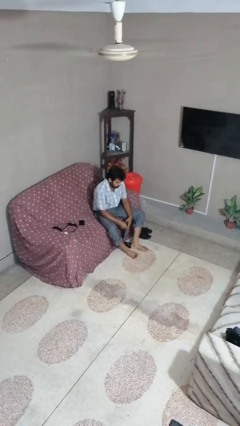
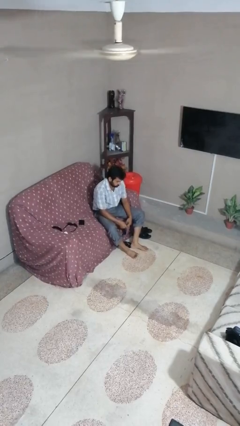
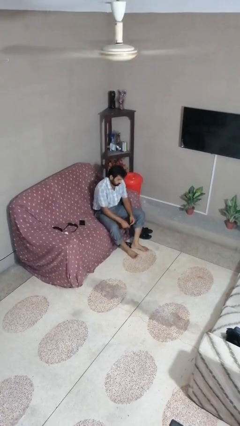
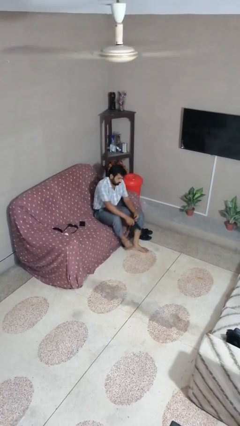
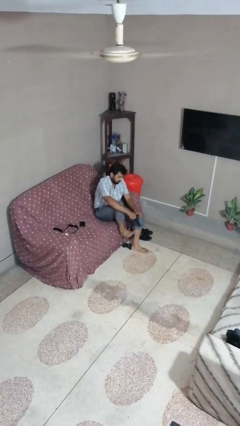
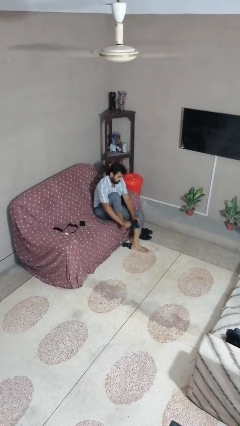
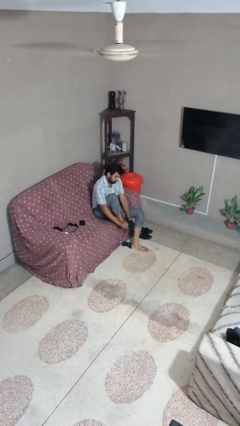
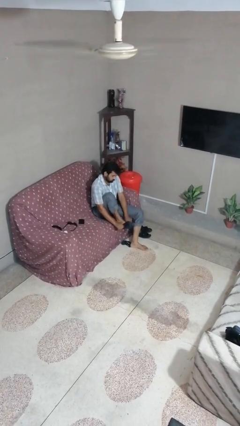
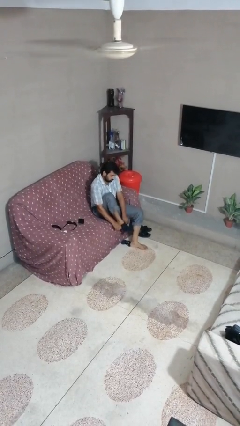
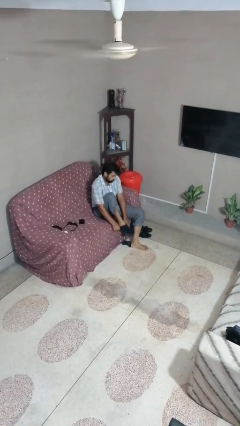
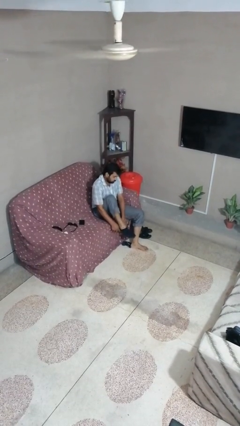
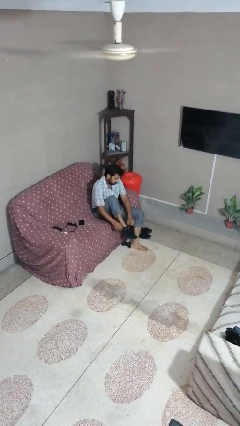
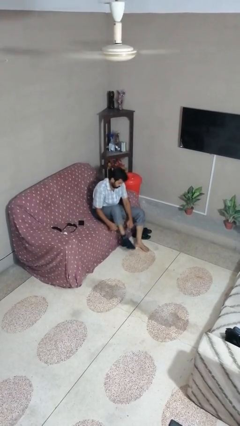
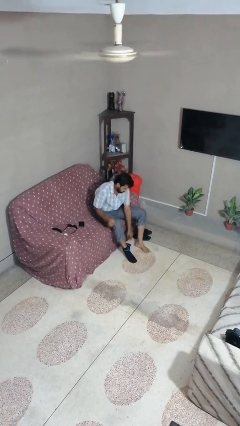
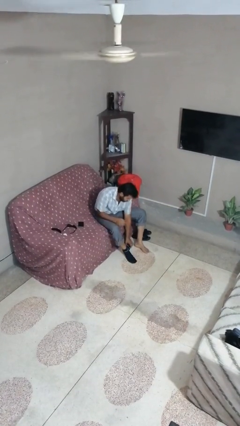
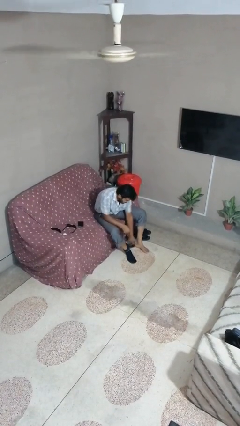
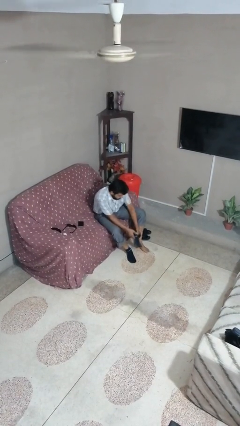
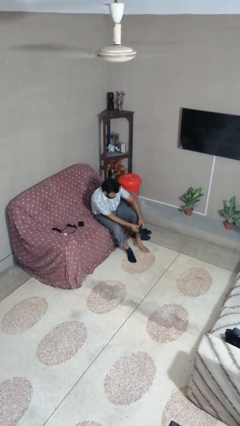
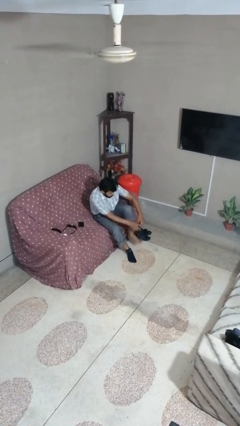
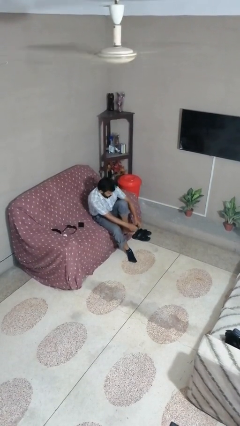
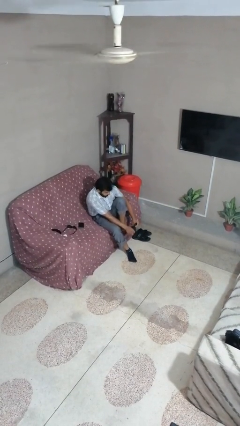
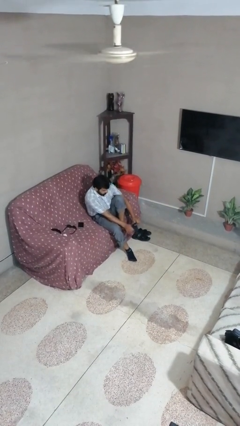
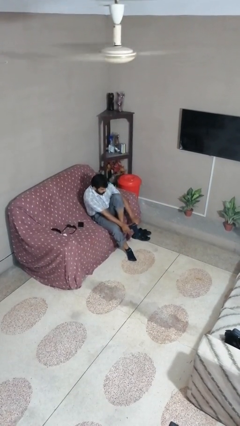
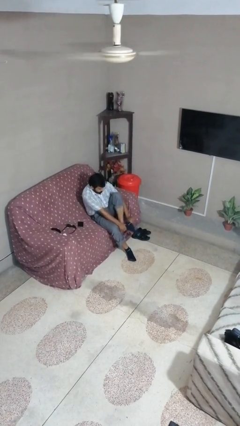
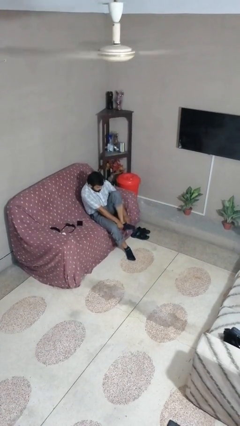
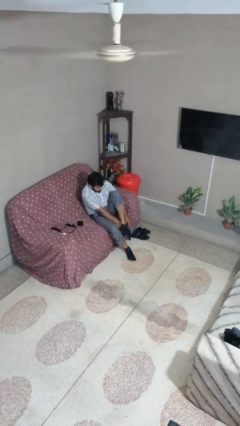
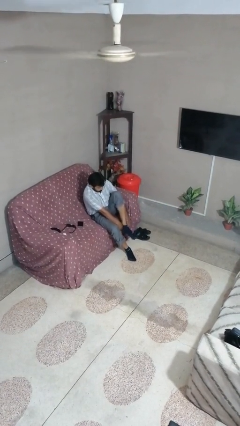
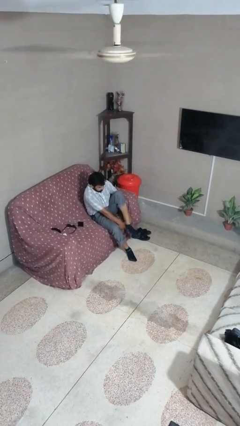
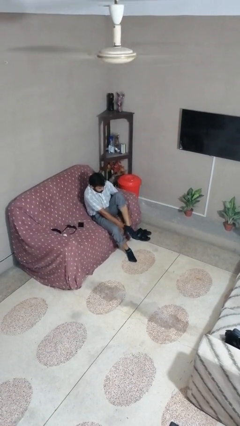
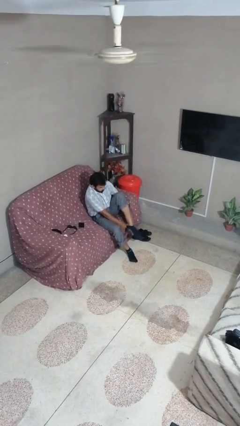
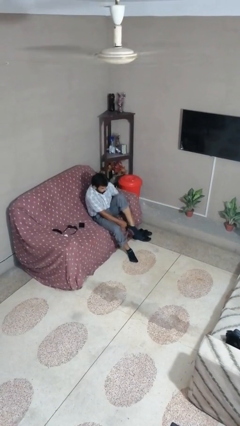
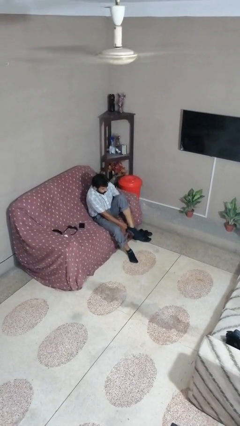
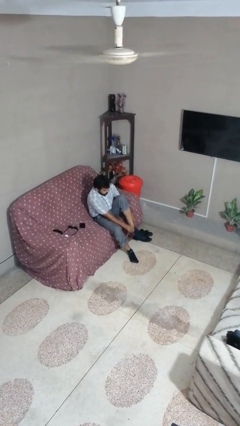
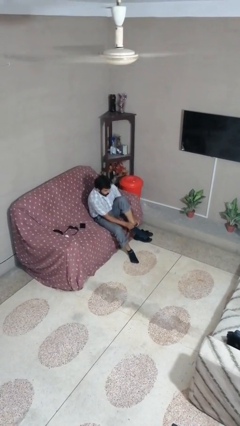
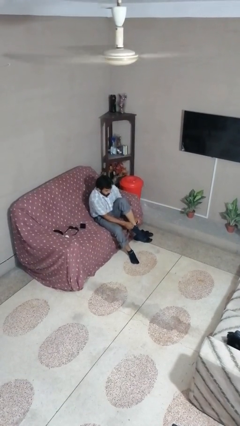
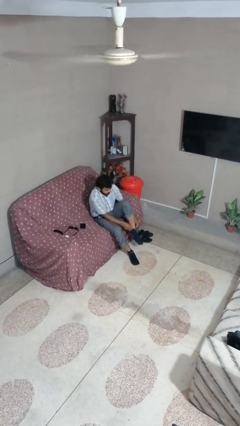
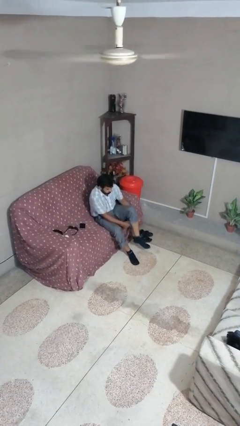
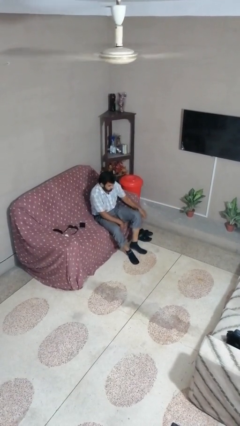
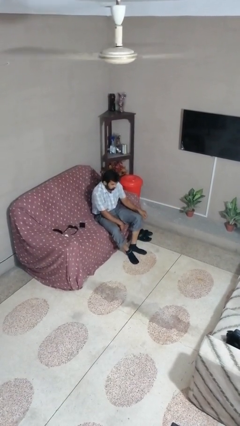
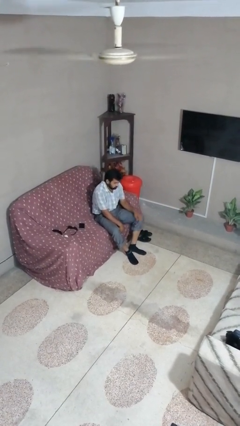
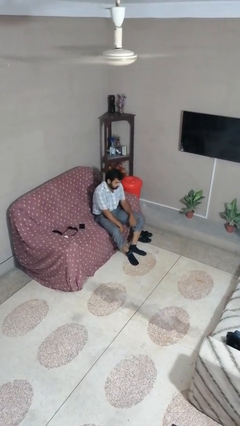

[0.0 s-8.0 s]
person puts on socks

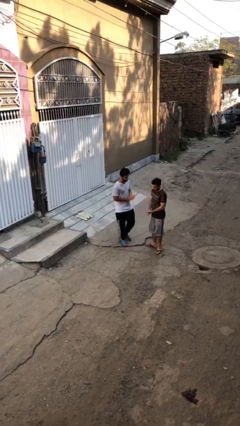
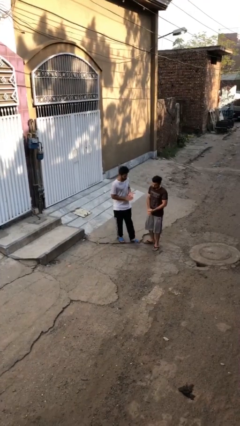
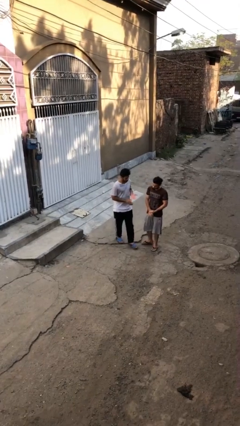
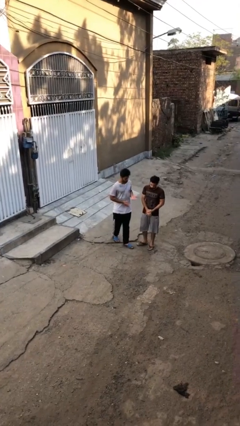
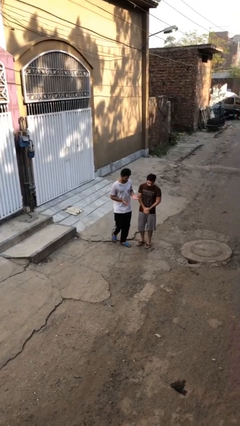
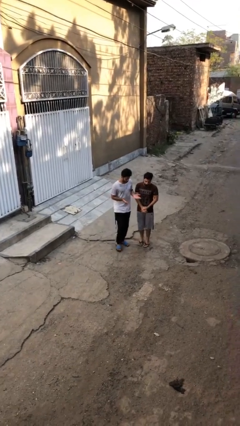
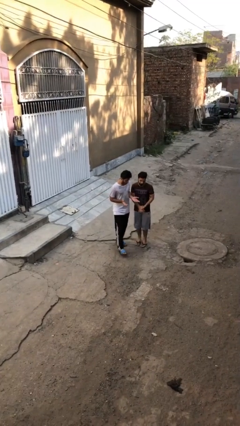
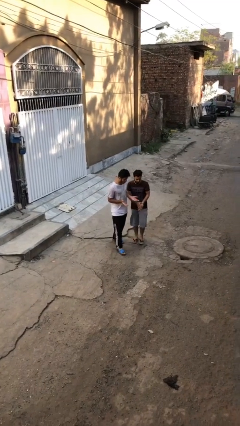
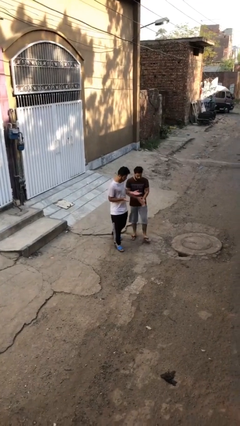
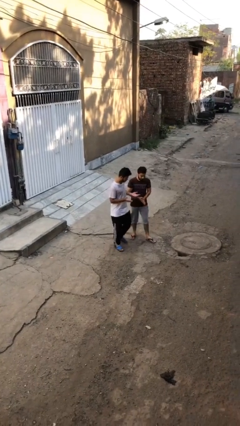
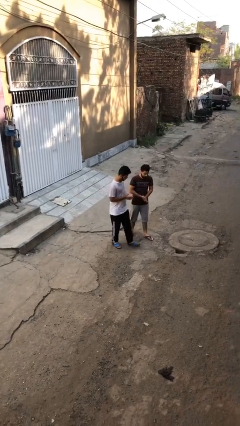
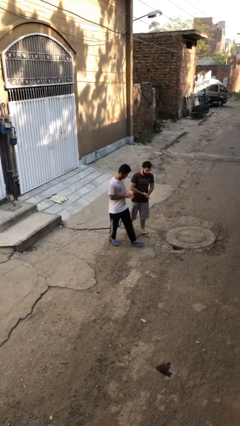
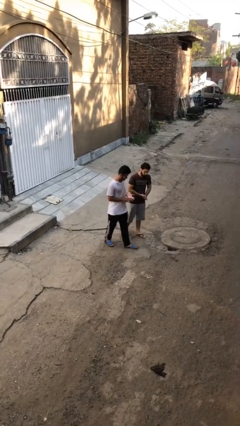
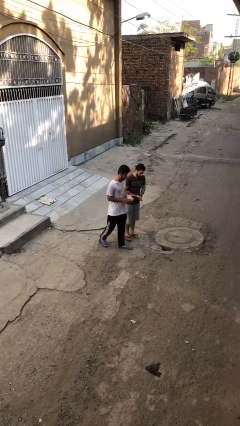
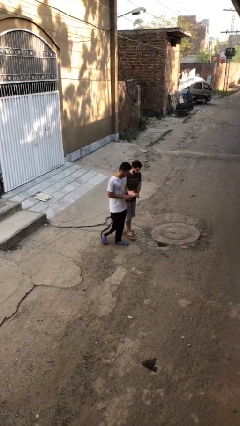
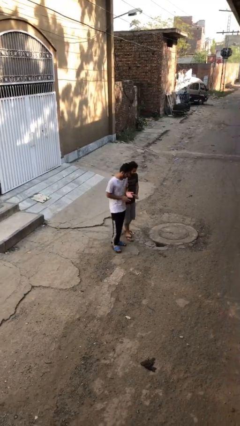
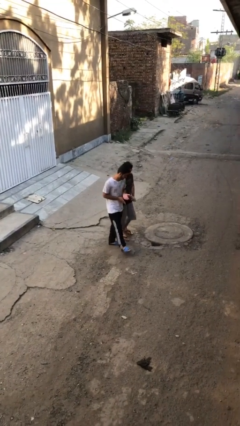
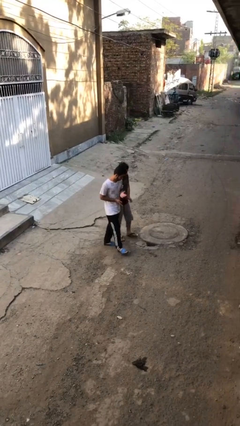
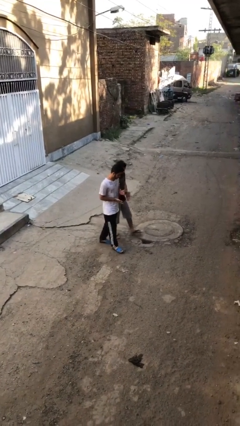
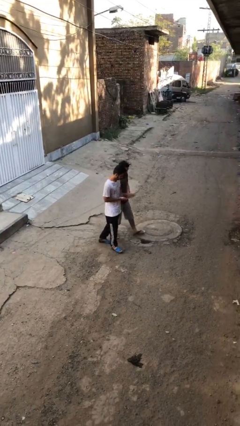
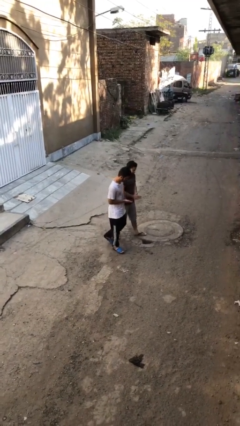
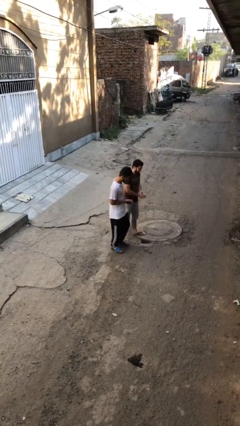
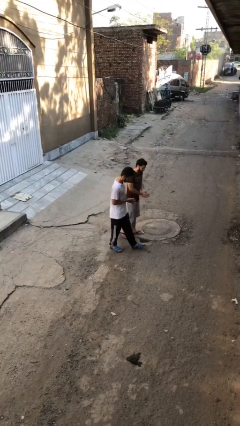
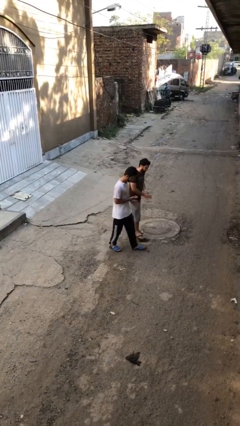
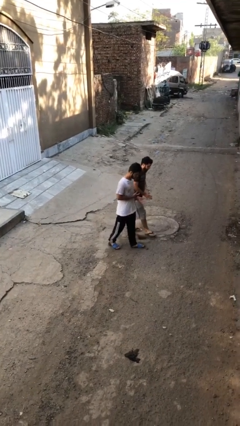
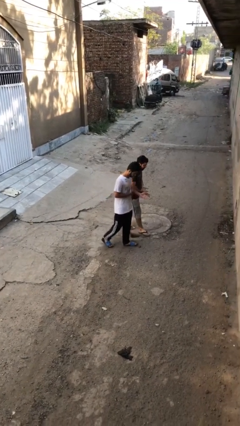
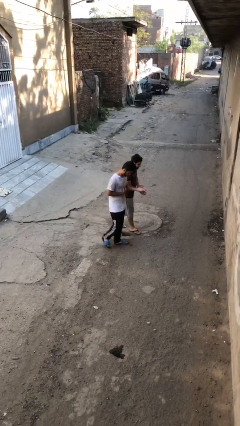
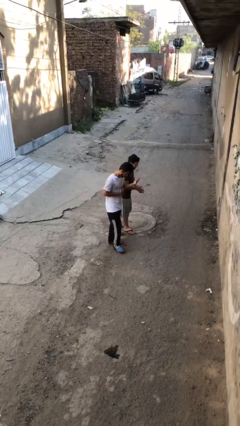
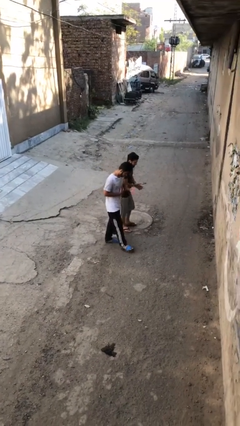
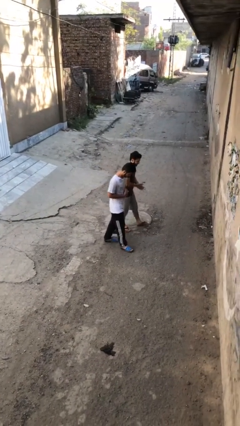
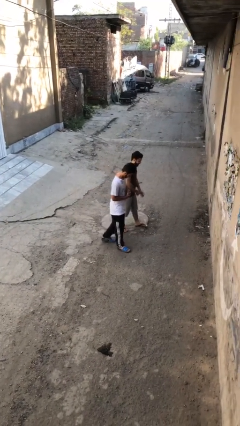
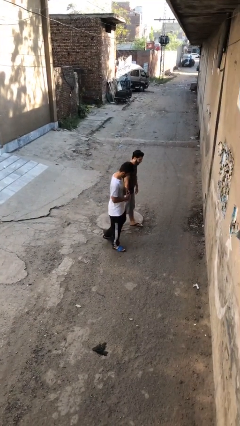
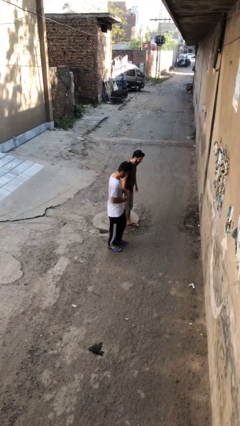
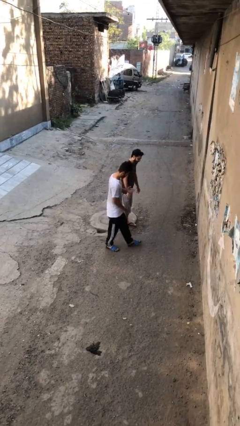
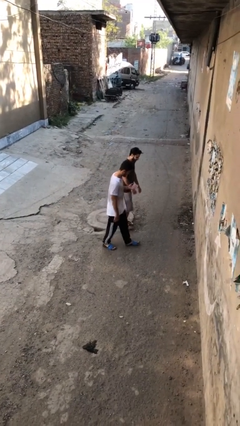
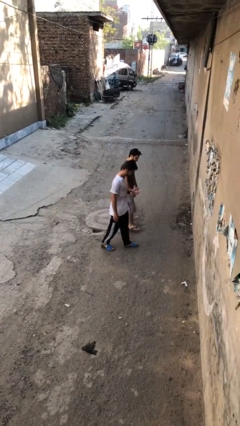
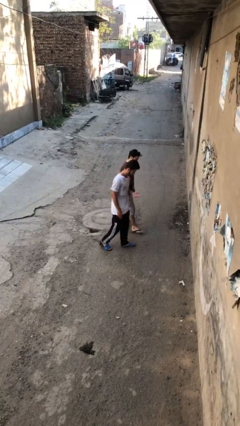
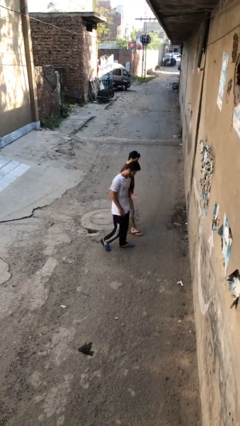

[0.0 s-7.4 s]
person talks to person

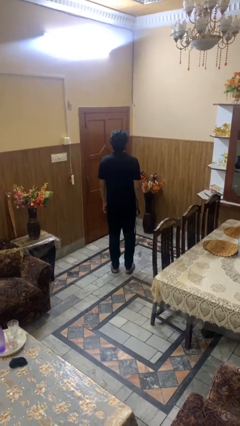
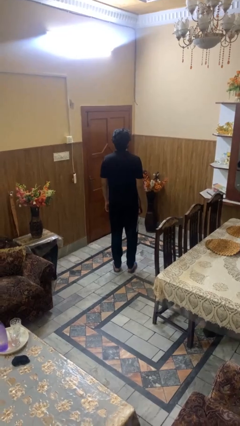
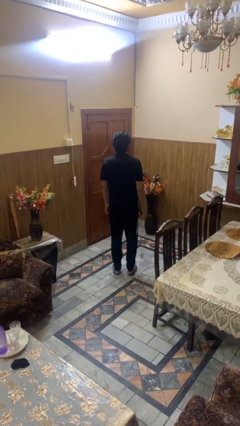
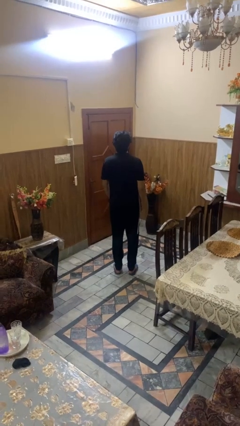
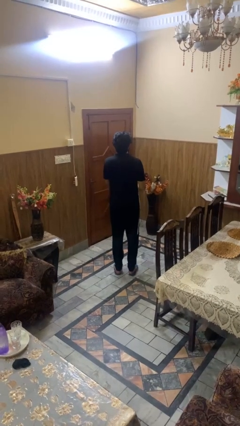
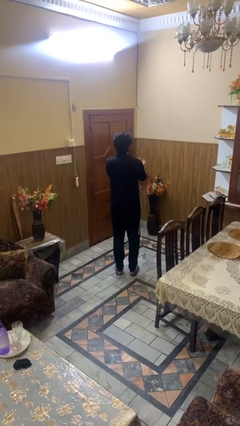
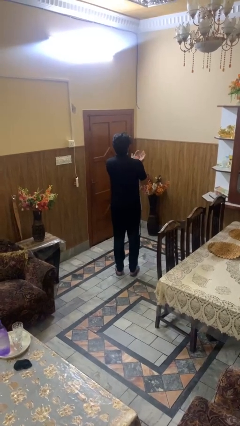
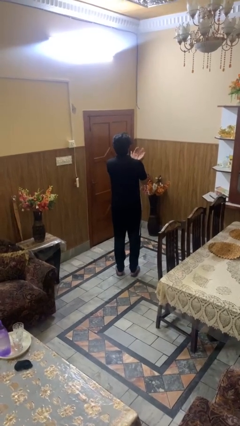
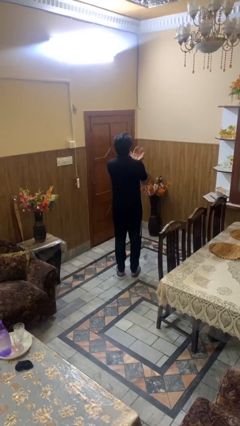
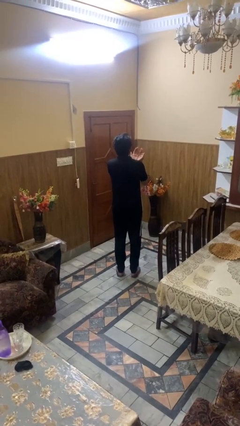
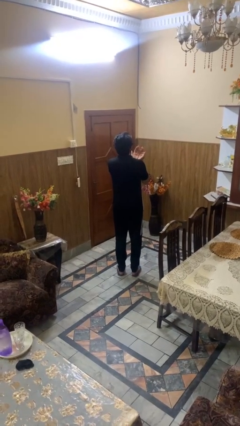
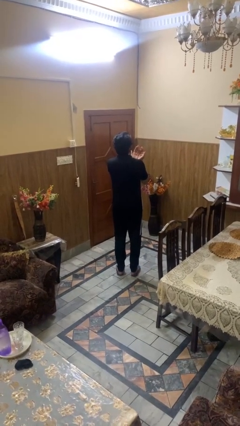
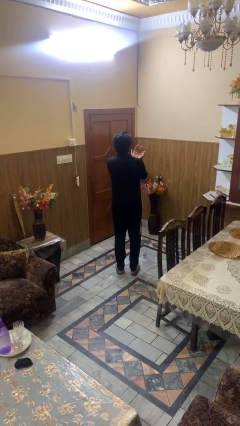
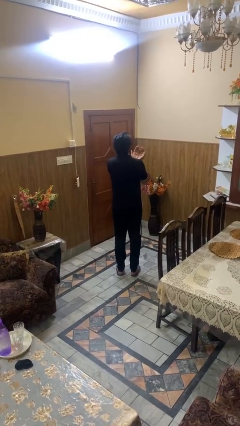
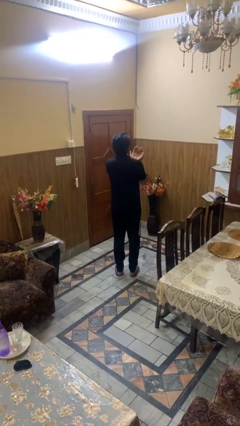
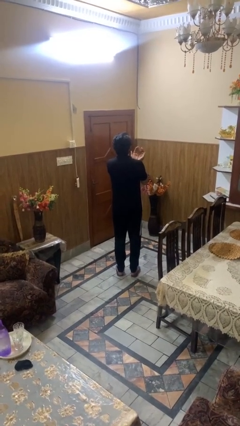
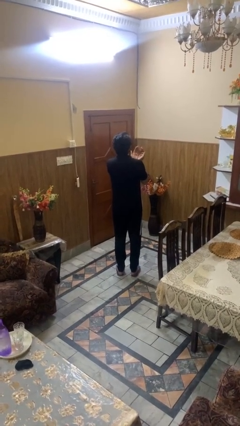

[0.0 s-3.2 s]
person prays
